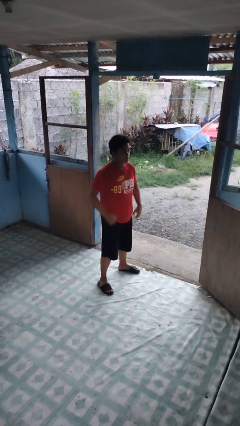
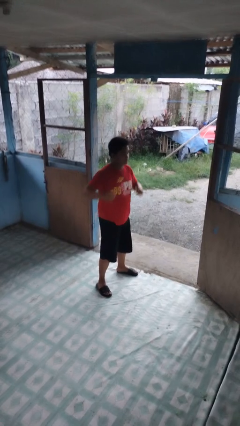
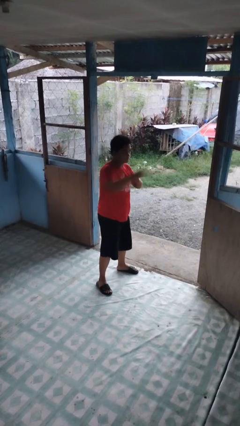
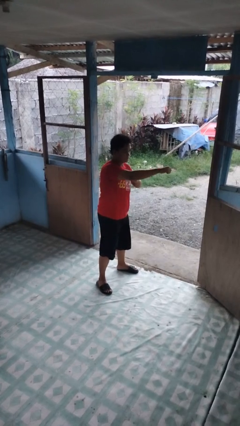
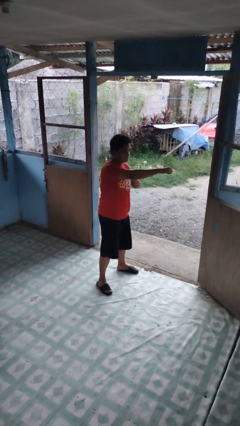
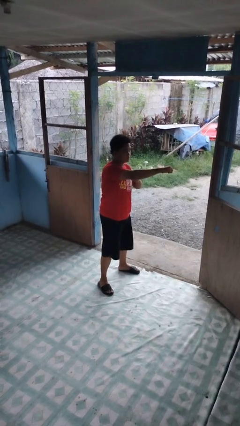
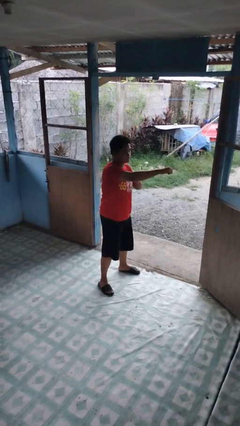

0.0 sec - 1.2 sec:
person punches

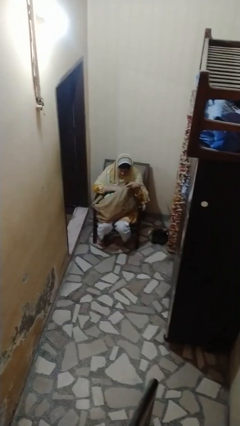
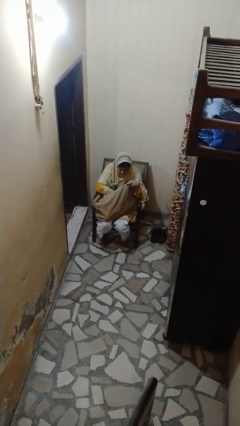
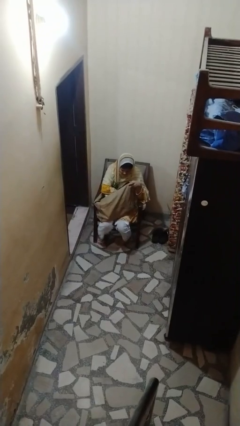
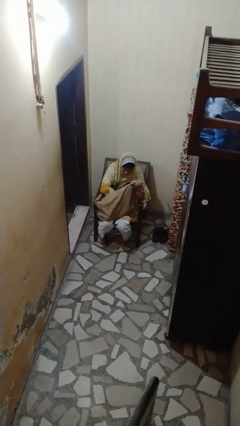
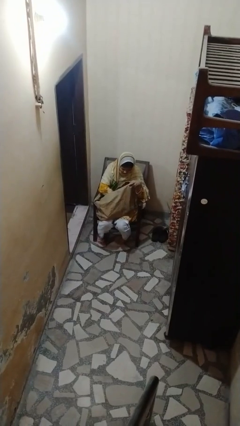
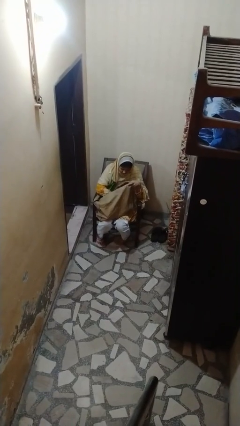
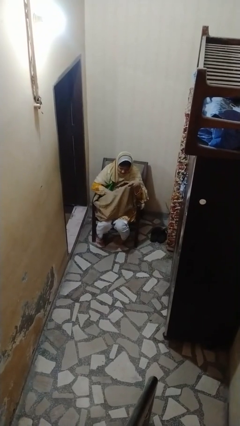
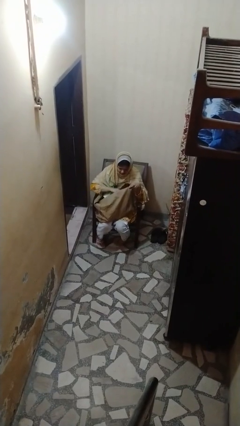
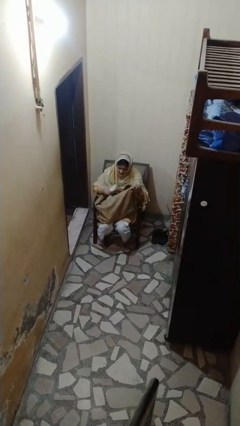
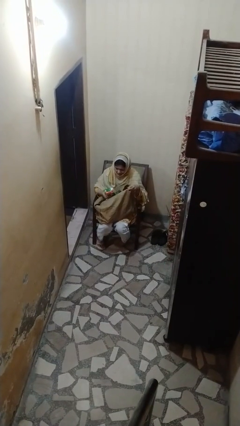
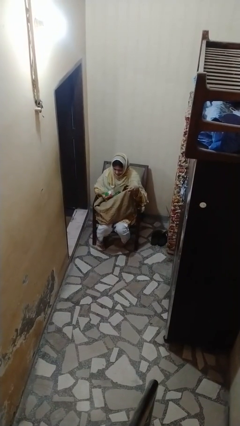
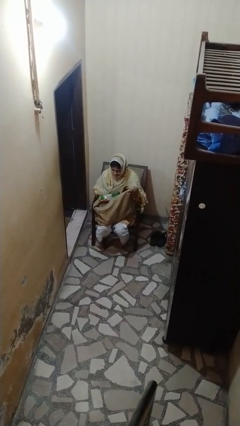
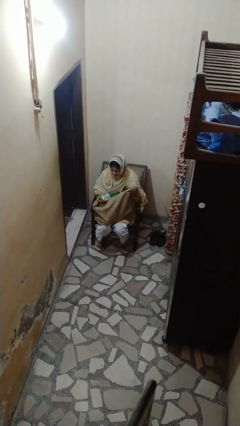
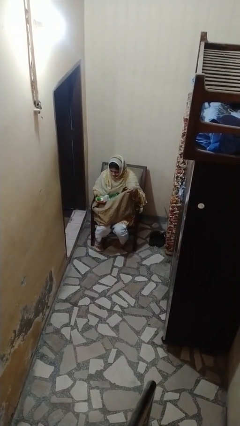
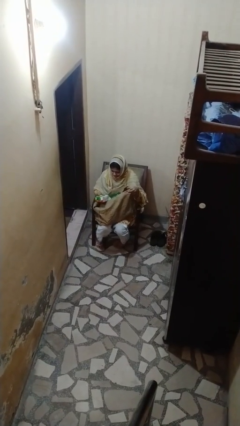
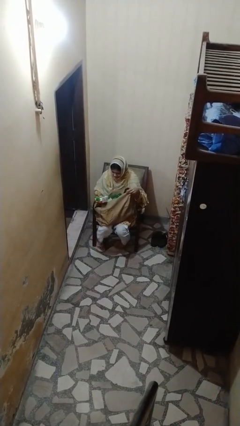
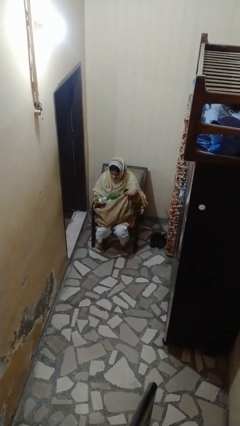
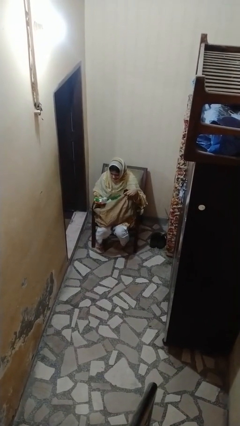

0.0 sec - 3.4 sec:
person takes object from bag

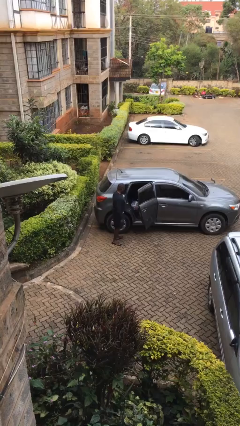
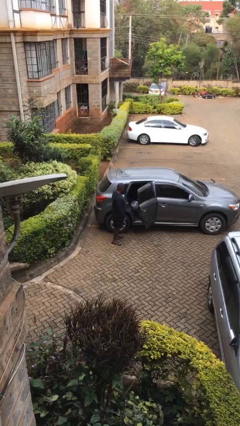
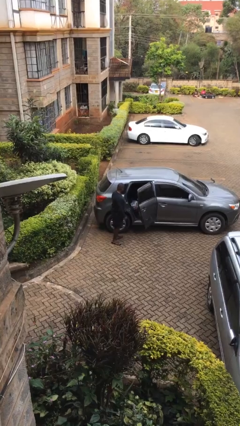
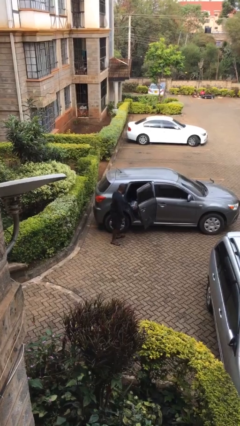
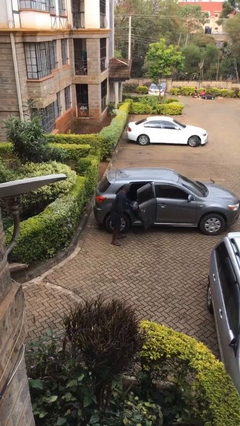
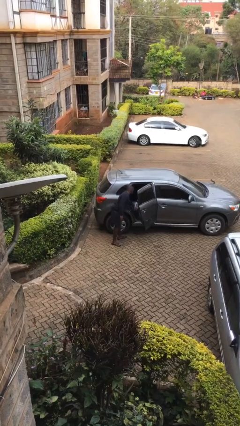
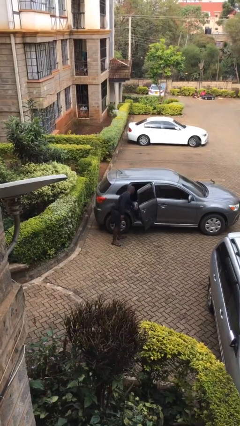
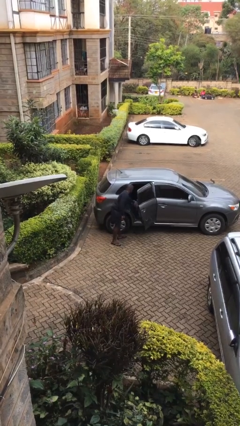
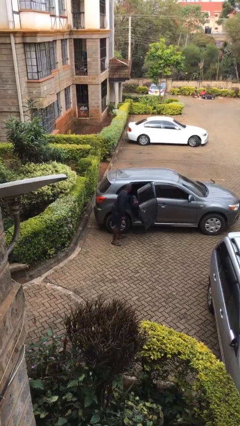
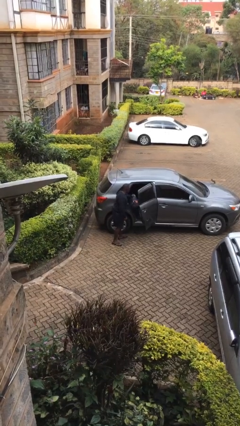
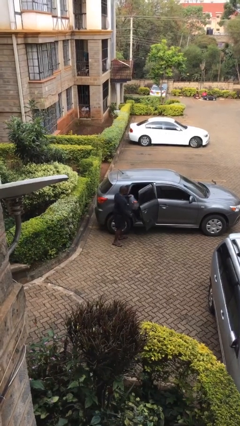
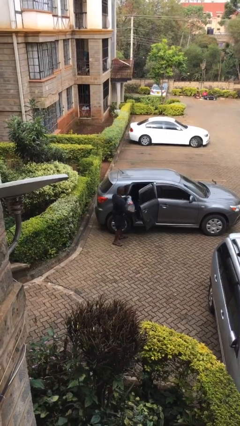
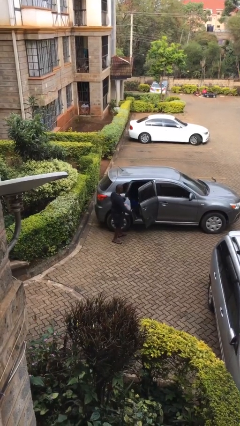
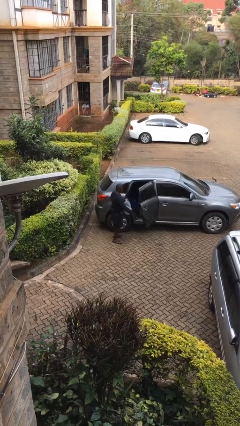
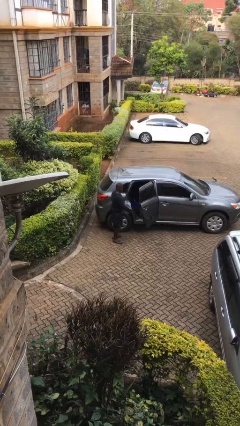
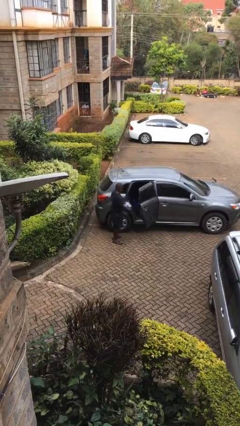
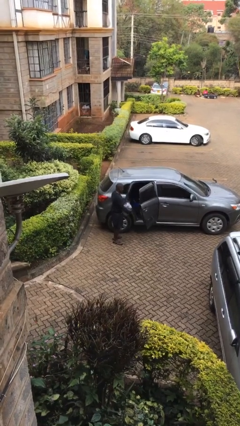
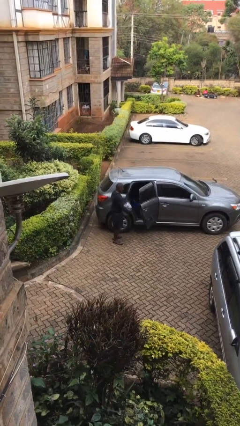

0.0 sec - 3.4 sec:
person unloads car

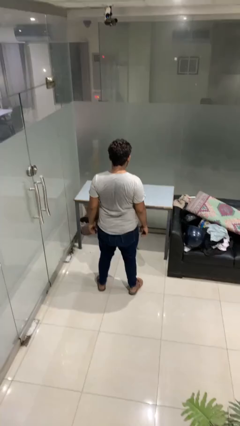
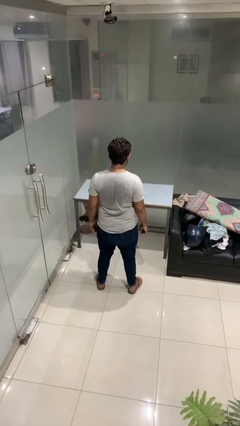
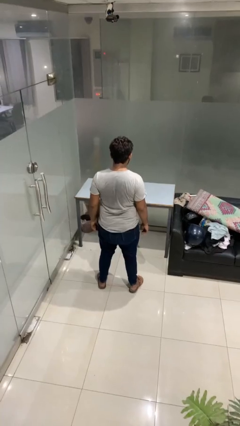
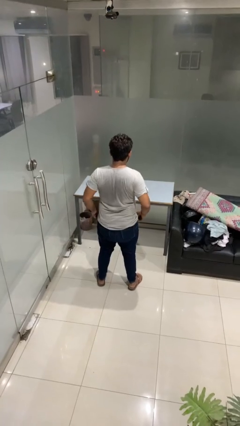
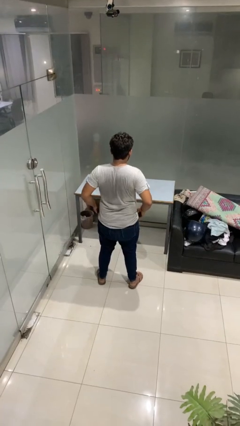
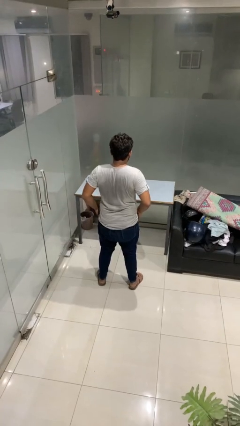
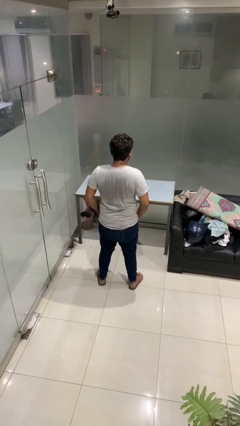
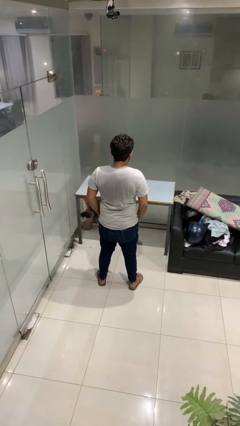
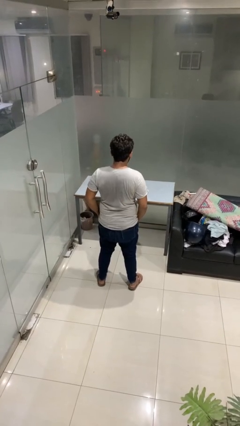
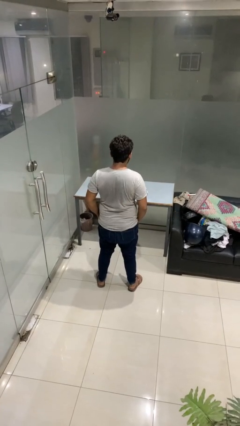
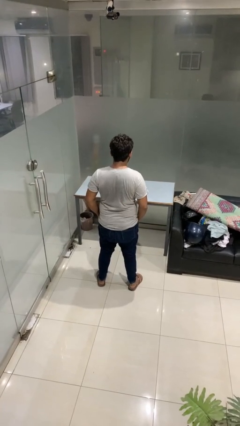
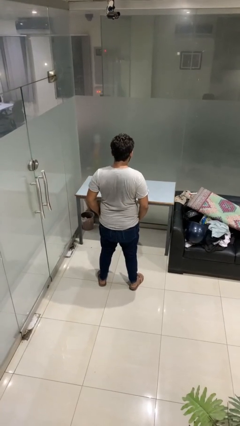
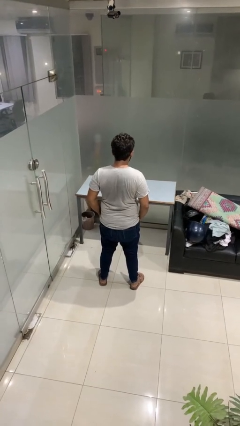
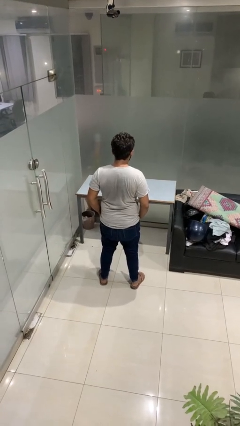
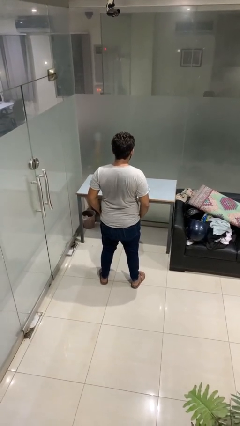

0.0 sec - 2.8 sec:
person puts hands in back pockets

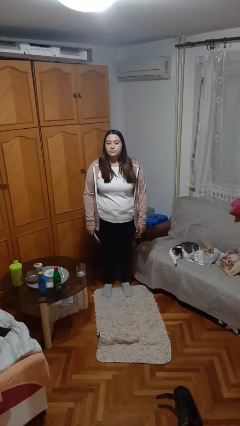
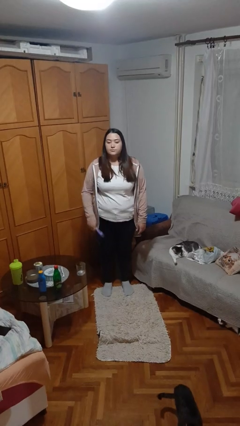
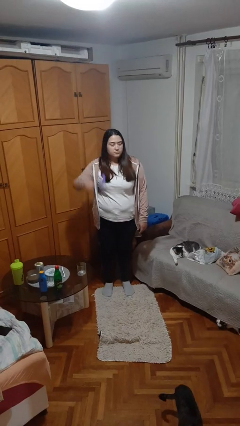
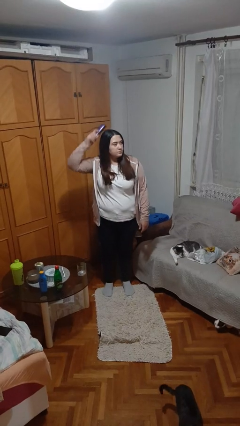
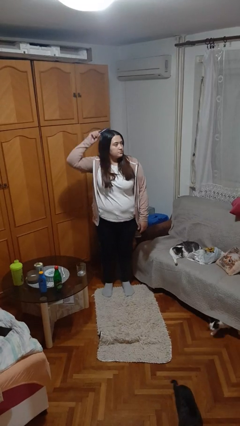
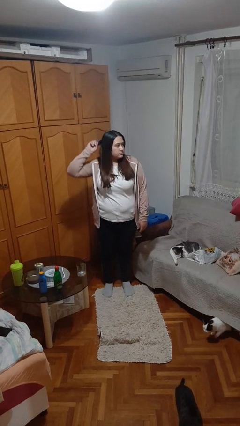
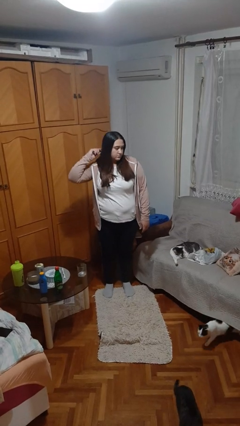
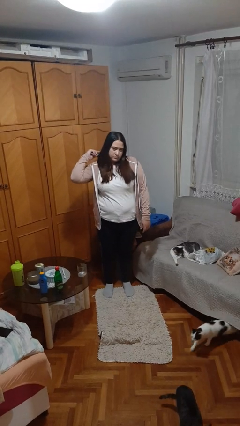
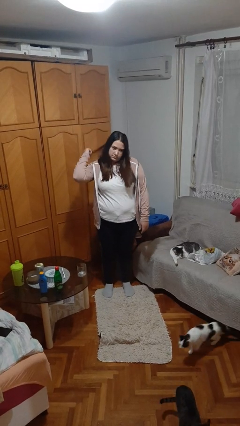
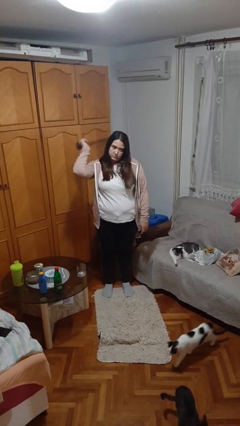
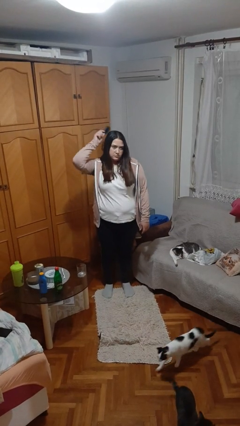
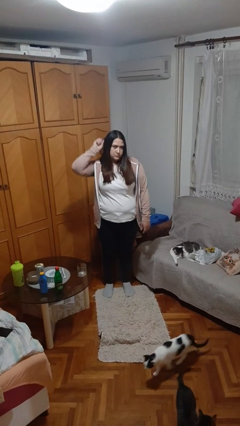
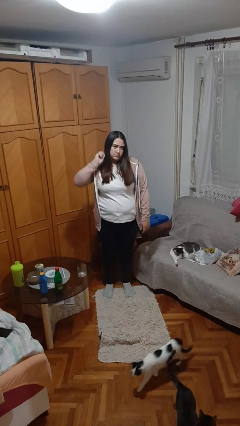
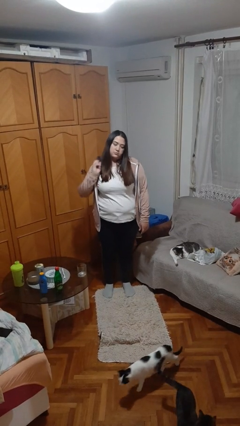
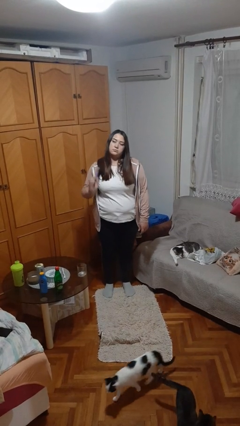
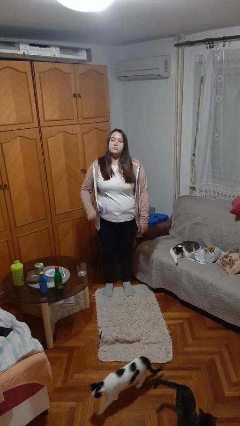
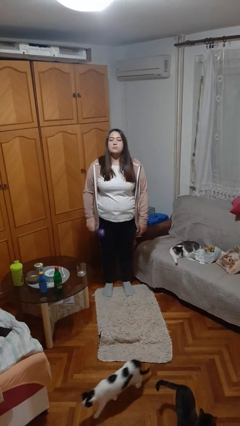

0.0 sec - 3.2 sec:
person brushes hair

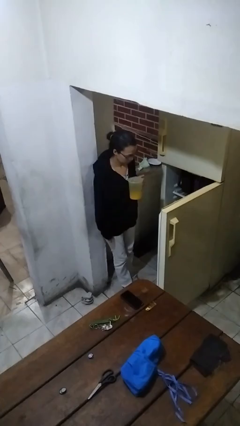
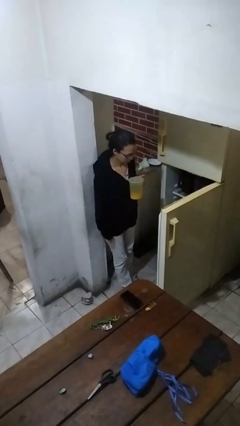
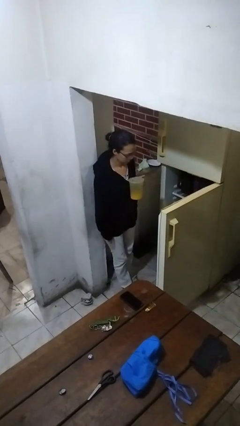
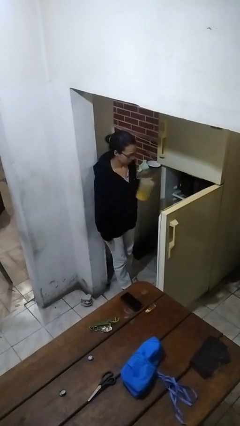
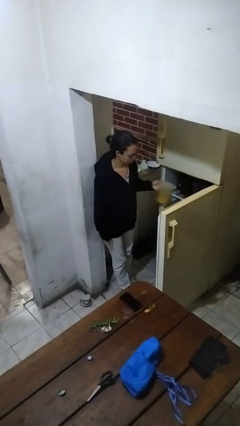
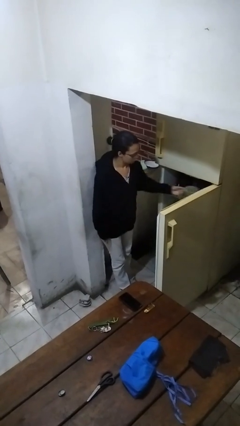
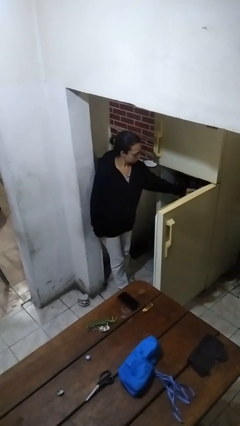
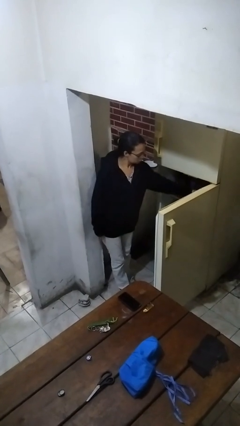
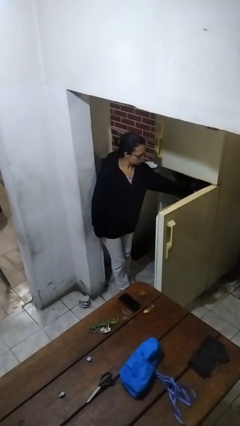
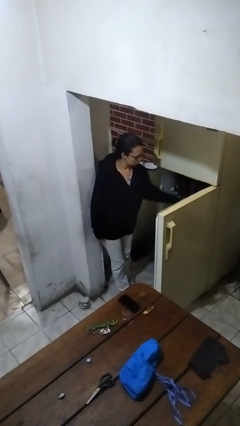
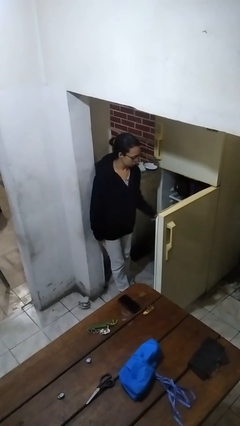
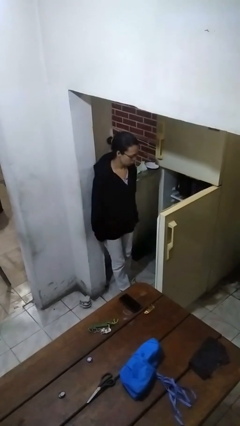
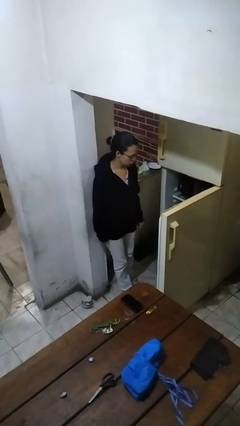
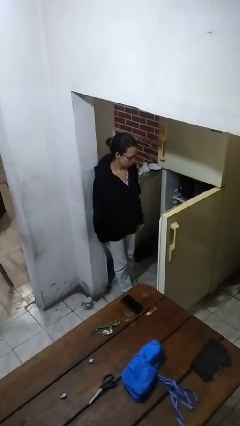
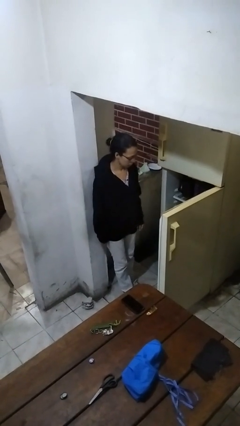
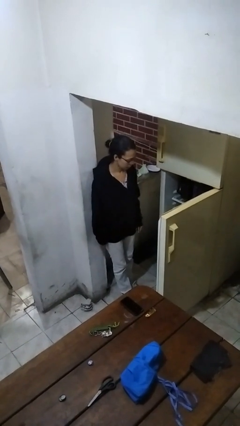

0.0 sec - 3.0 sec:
person puts object into refrigerator

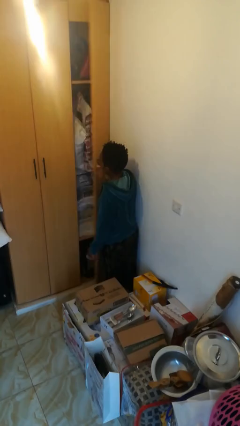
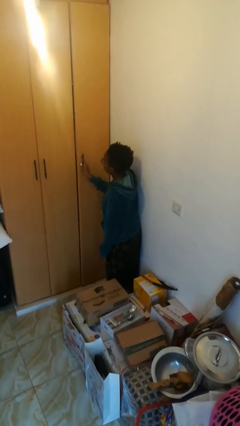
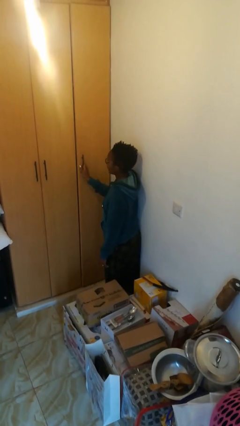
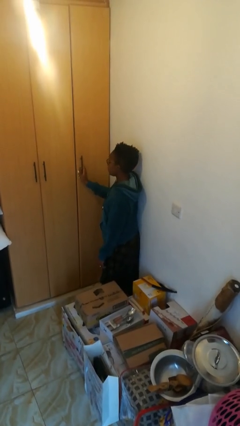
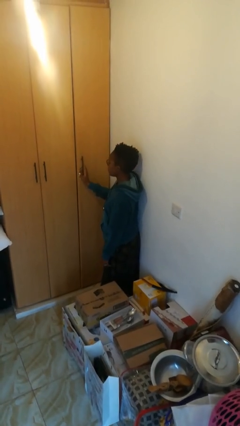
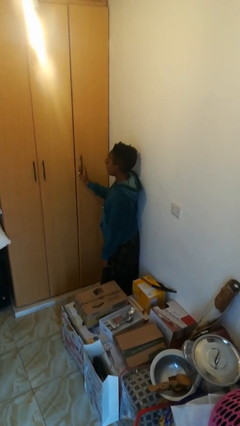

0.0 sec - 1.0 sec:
person closes closet door
